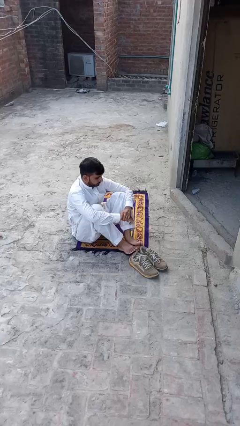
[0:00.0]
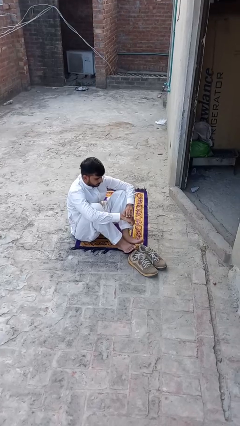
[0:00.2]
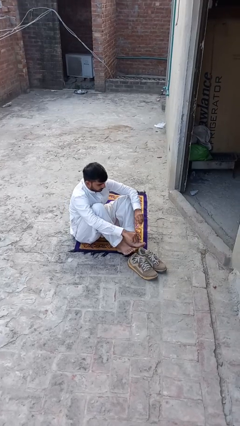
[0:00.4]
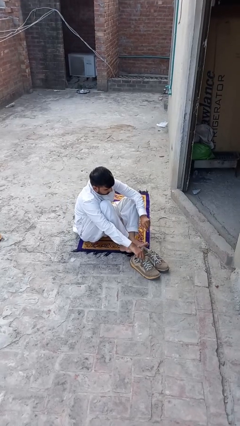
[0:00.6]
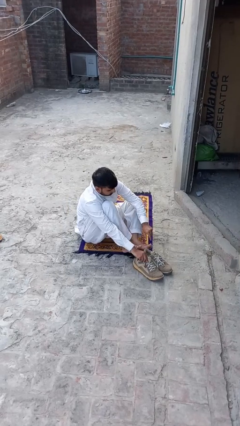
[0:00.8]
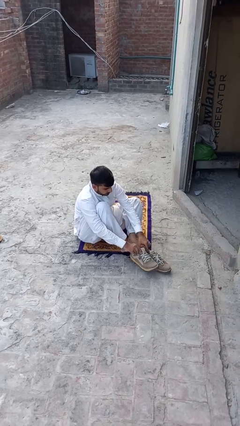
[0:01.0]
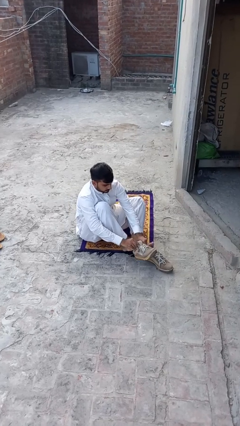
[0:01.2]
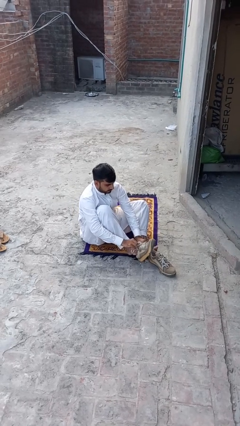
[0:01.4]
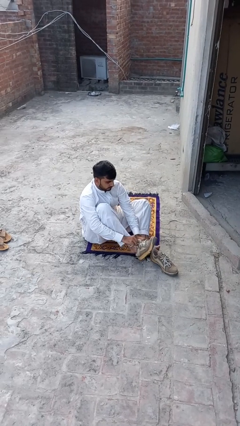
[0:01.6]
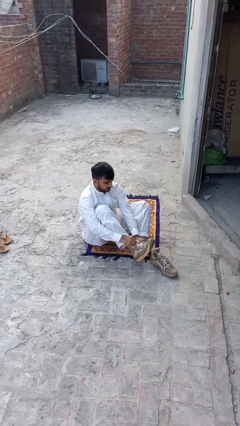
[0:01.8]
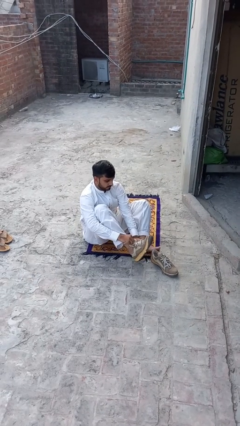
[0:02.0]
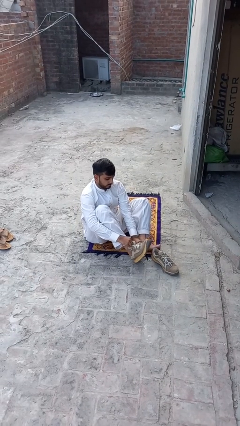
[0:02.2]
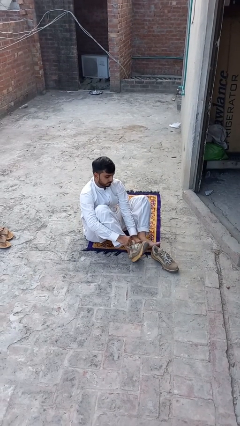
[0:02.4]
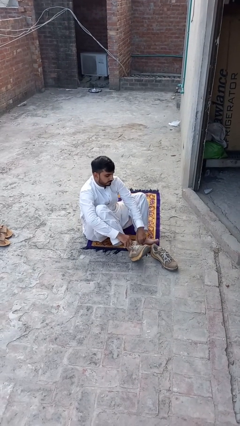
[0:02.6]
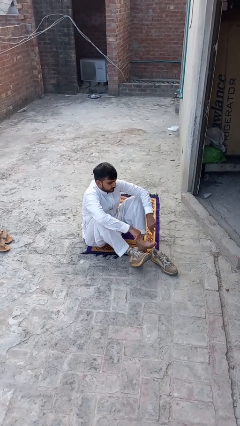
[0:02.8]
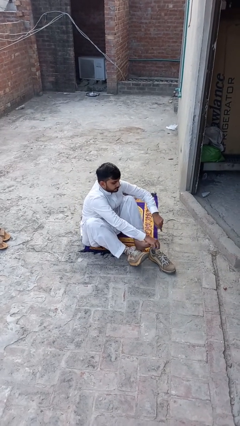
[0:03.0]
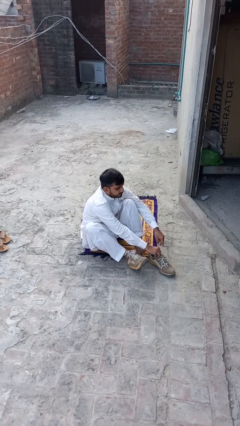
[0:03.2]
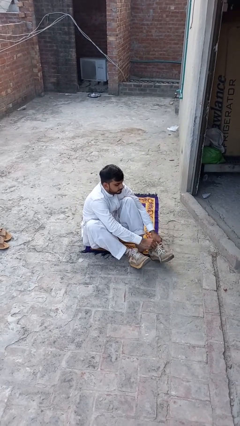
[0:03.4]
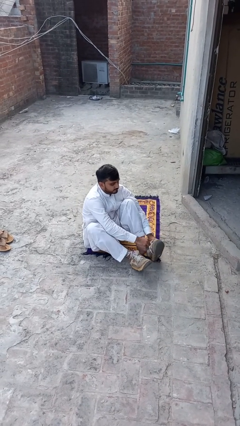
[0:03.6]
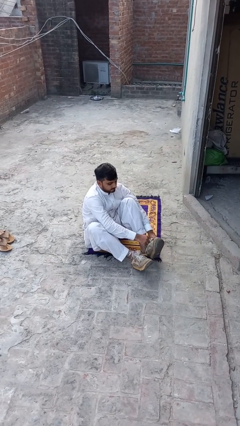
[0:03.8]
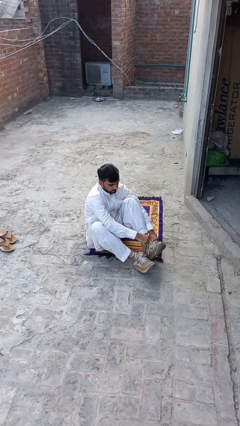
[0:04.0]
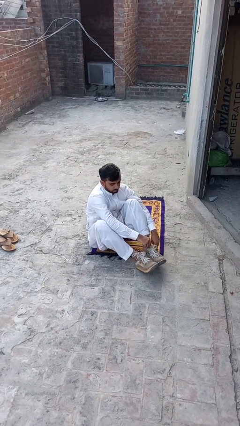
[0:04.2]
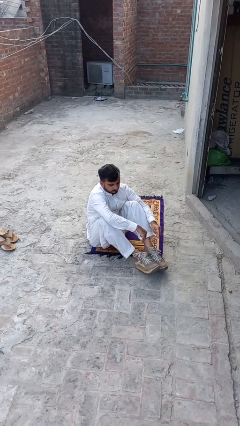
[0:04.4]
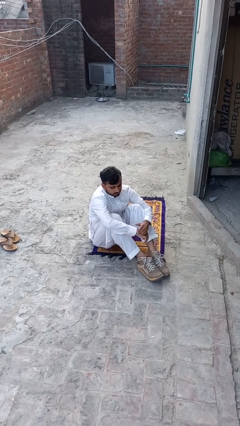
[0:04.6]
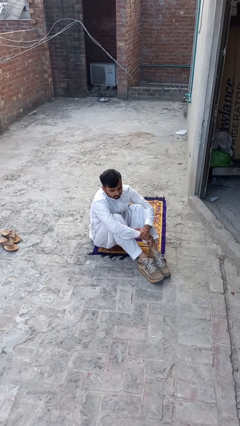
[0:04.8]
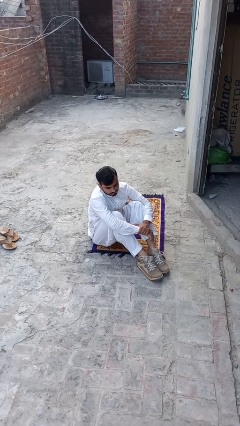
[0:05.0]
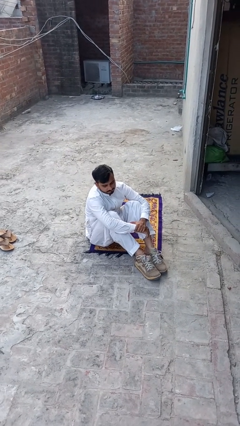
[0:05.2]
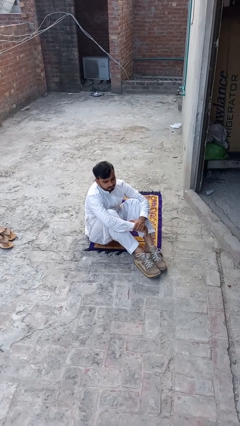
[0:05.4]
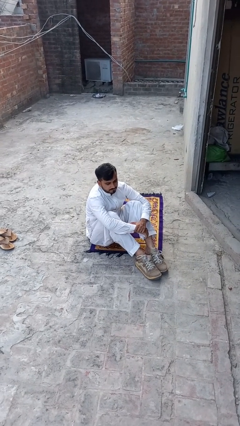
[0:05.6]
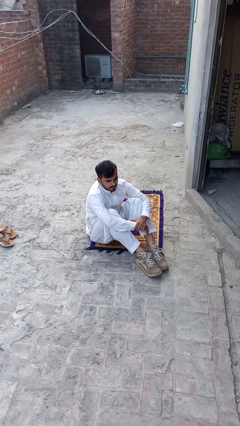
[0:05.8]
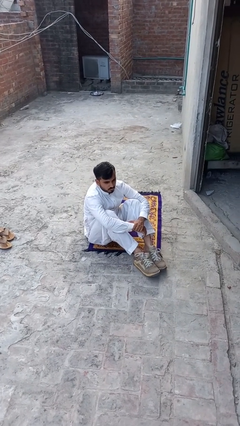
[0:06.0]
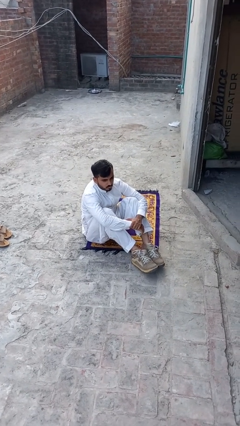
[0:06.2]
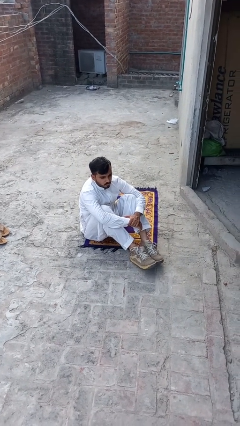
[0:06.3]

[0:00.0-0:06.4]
person puts on shoes

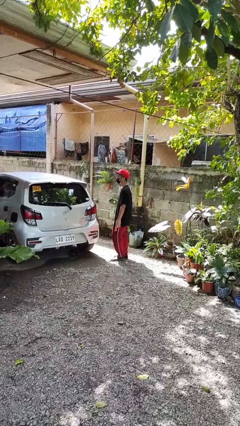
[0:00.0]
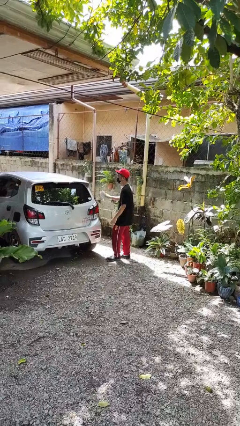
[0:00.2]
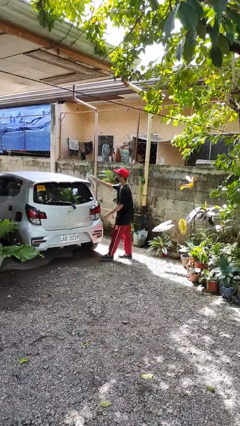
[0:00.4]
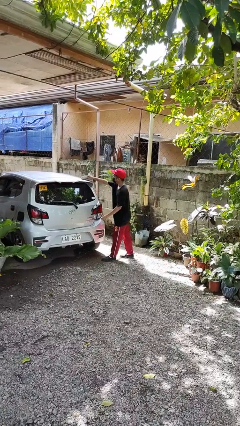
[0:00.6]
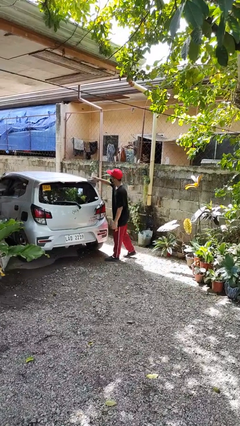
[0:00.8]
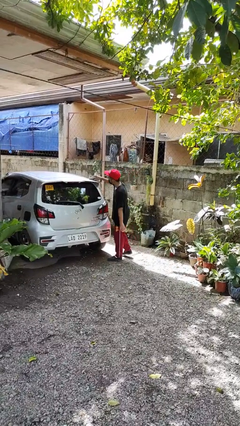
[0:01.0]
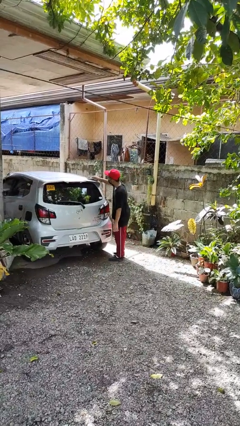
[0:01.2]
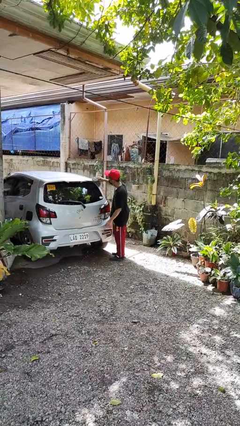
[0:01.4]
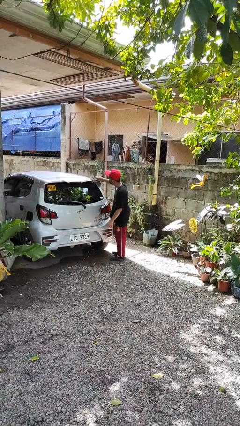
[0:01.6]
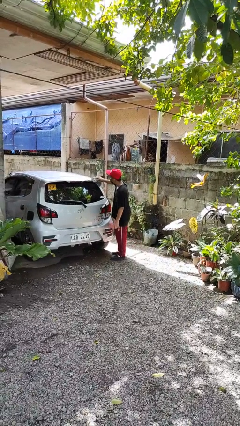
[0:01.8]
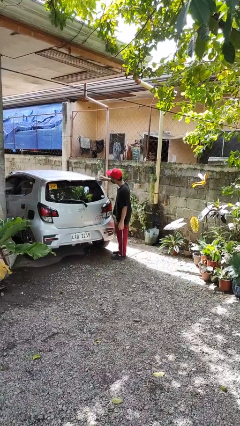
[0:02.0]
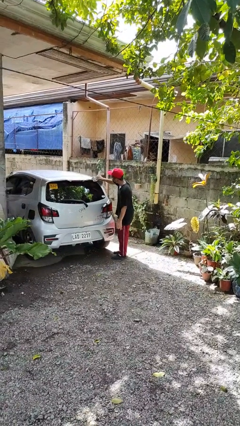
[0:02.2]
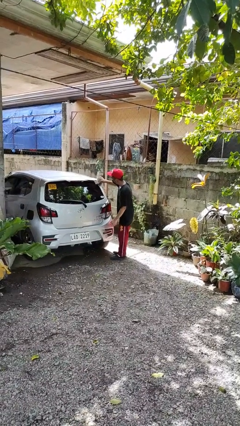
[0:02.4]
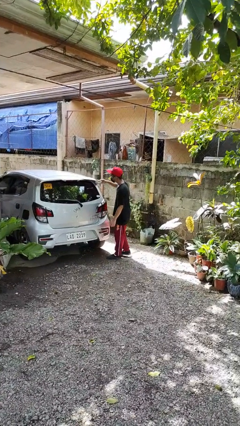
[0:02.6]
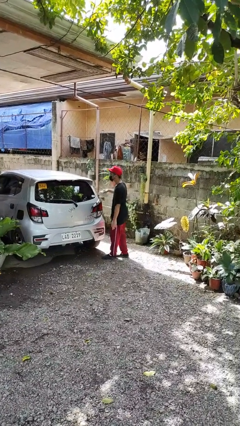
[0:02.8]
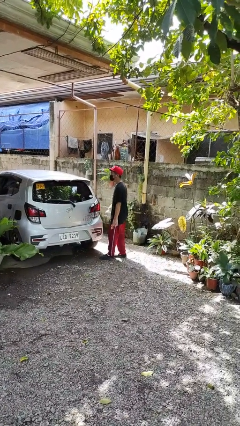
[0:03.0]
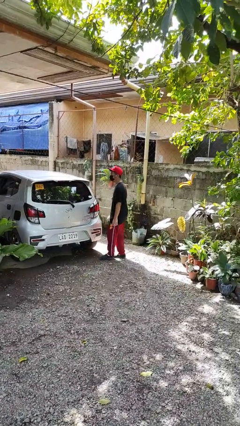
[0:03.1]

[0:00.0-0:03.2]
person polishes car with rag

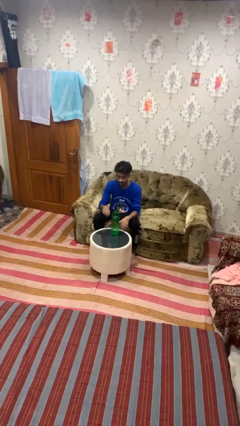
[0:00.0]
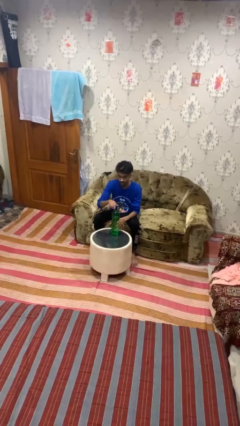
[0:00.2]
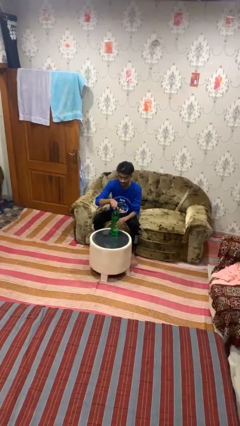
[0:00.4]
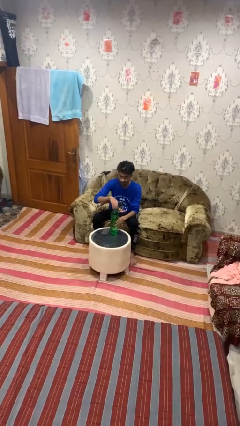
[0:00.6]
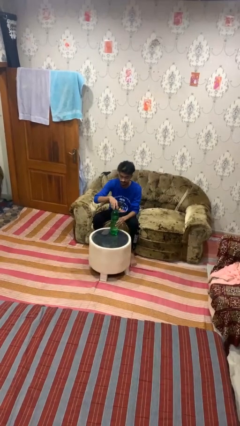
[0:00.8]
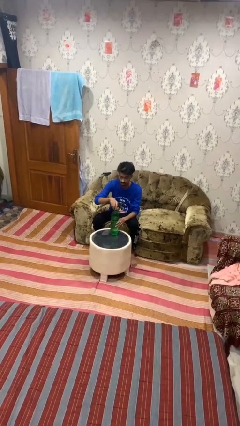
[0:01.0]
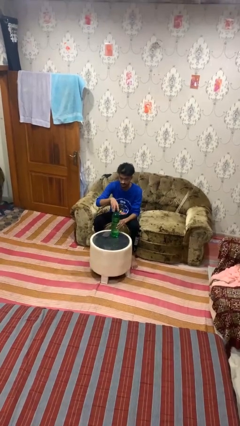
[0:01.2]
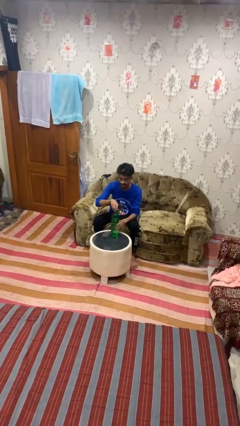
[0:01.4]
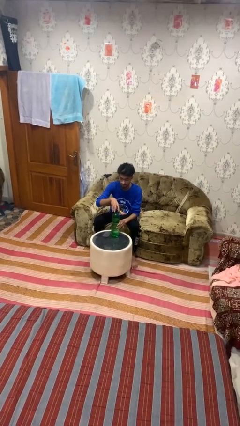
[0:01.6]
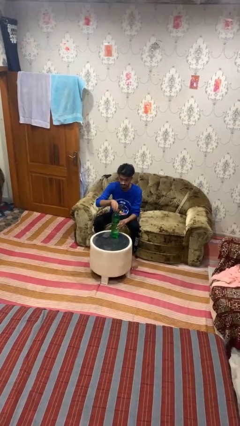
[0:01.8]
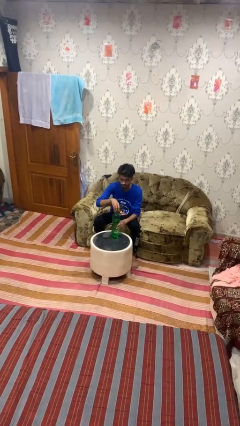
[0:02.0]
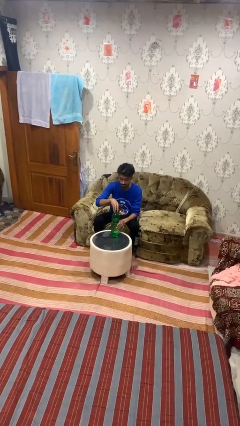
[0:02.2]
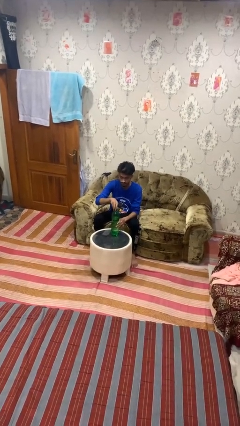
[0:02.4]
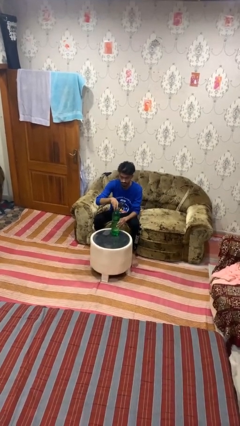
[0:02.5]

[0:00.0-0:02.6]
person unscrews lid from bottle

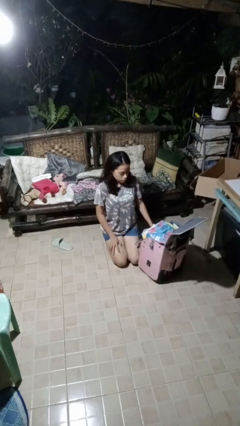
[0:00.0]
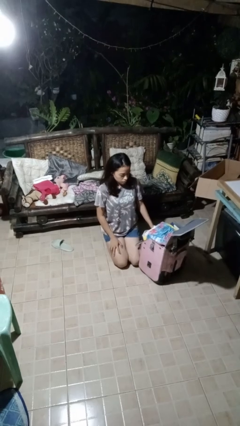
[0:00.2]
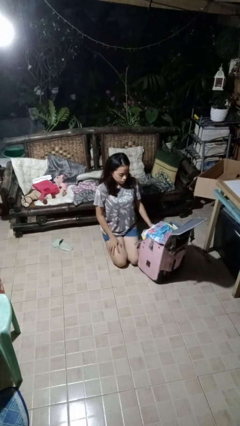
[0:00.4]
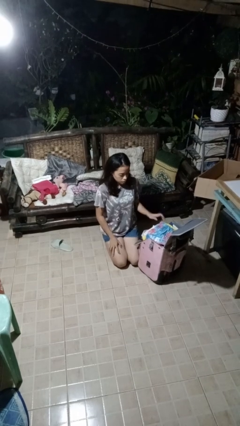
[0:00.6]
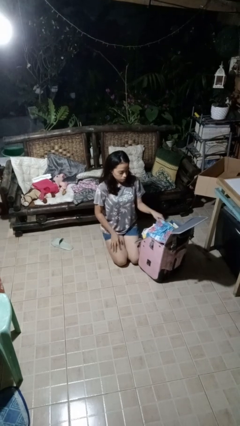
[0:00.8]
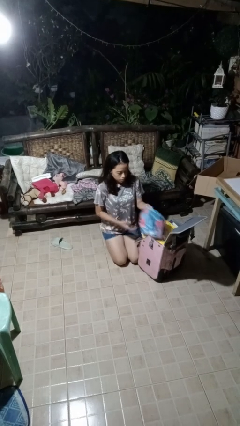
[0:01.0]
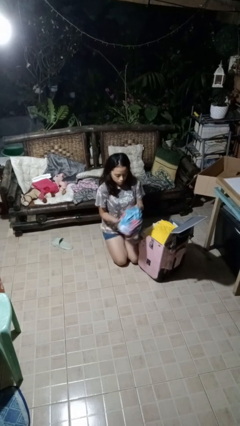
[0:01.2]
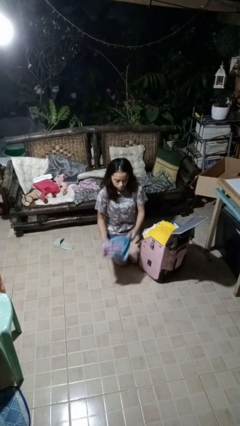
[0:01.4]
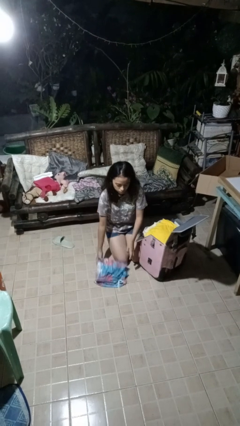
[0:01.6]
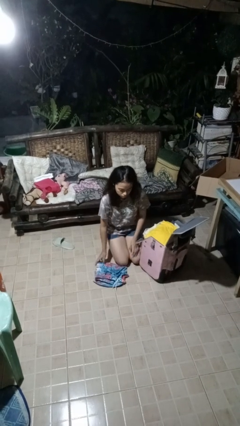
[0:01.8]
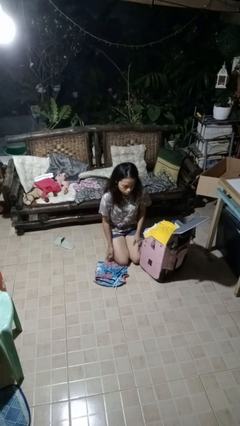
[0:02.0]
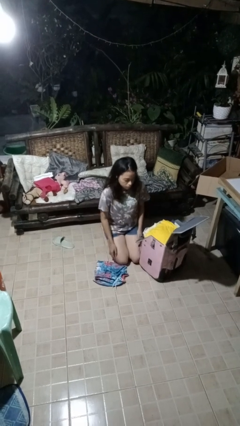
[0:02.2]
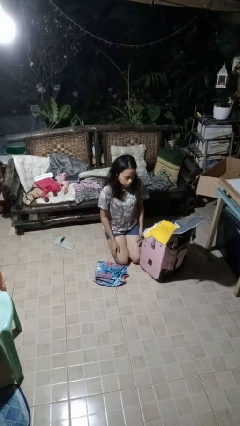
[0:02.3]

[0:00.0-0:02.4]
person unloads clothes from suitcase

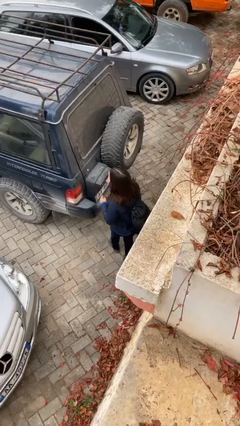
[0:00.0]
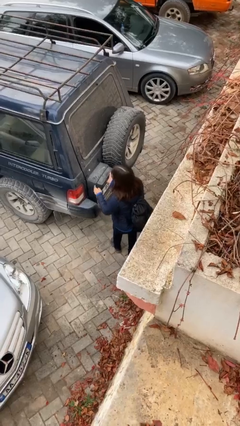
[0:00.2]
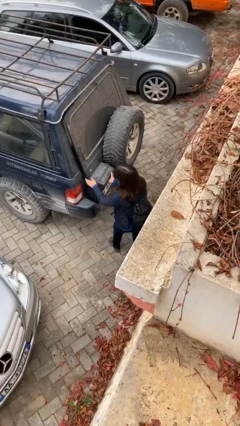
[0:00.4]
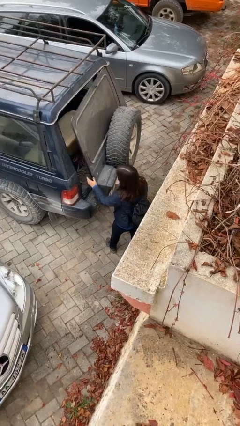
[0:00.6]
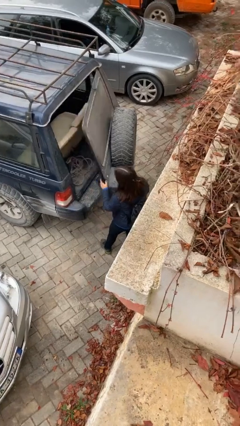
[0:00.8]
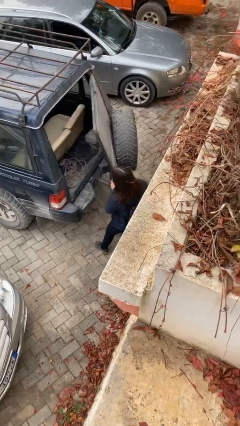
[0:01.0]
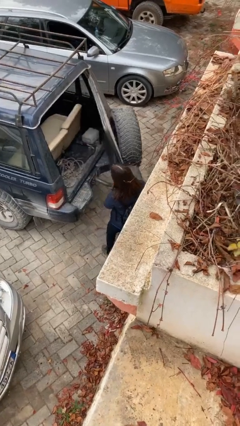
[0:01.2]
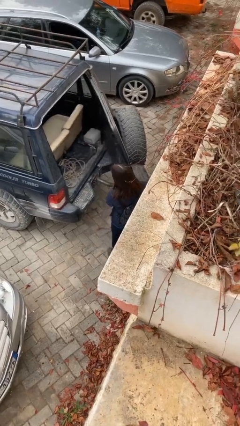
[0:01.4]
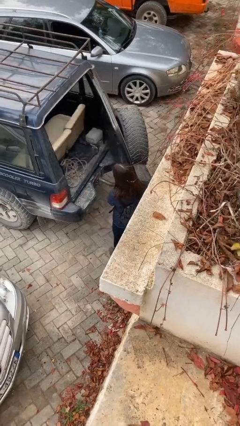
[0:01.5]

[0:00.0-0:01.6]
person opens car trunk

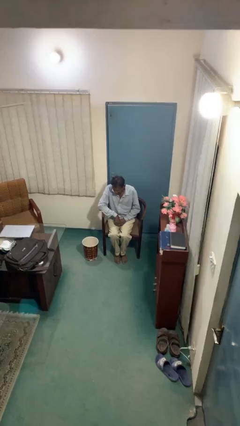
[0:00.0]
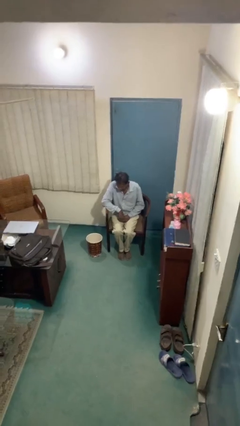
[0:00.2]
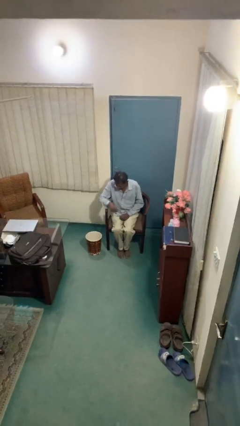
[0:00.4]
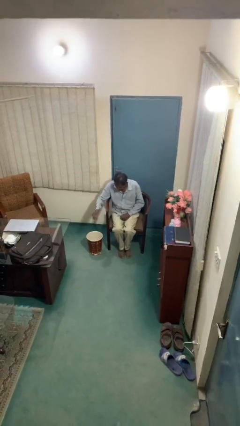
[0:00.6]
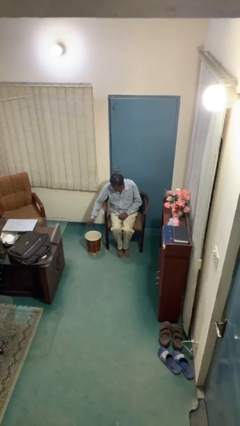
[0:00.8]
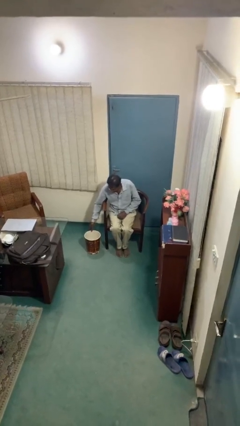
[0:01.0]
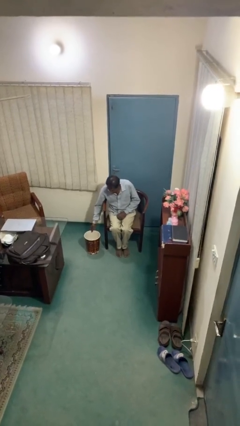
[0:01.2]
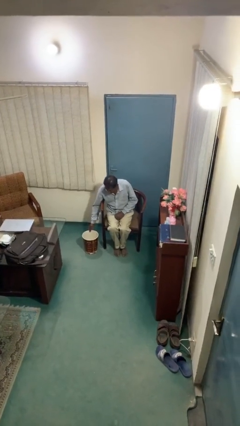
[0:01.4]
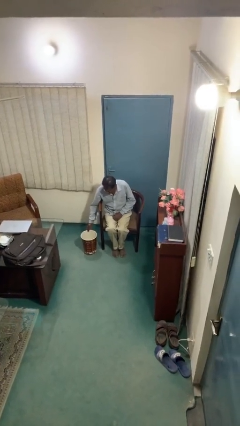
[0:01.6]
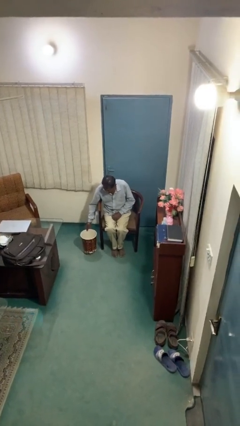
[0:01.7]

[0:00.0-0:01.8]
person picks up object from floor
